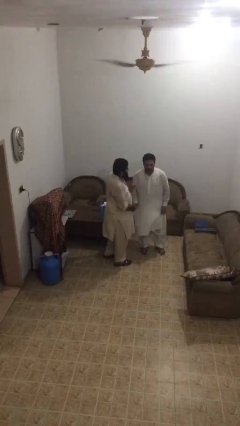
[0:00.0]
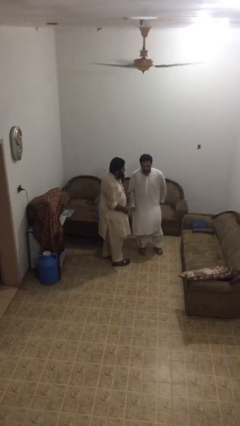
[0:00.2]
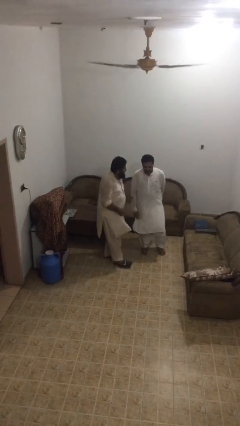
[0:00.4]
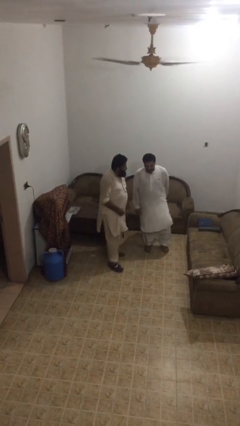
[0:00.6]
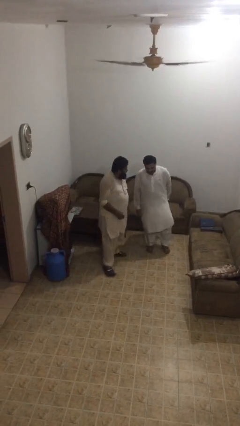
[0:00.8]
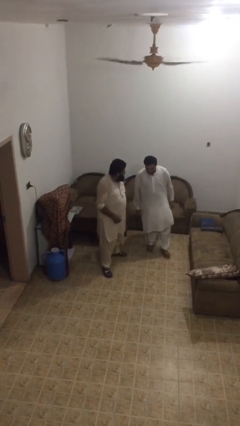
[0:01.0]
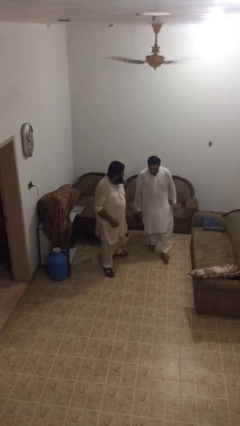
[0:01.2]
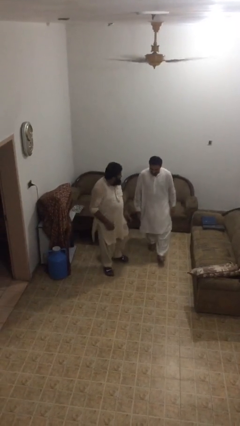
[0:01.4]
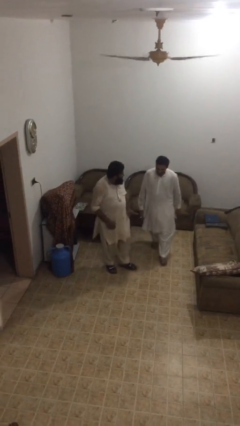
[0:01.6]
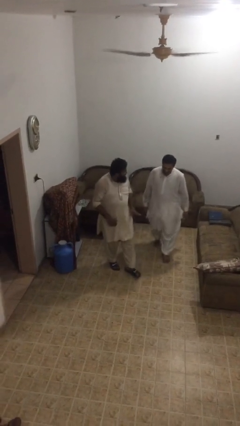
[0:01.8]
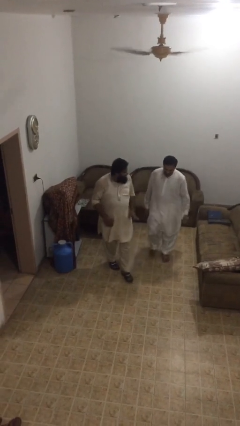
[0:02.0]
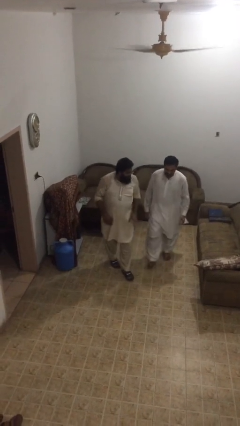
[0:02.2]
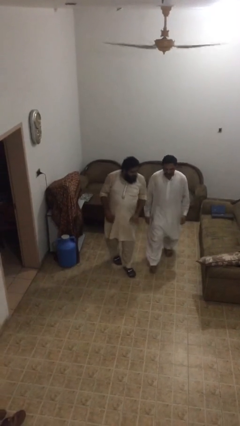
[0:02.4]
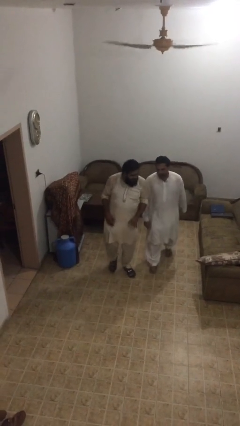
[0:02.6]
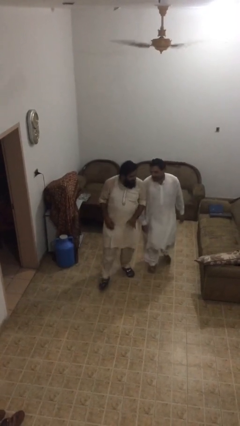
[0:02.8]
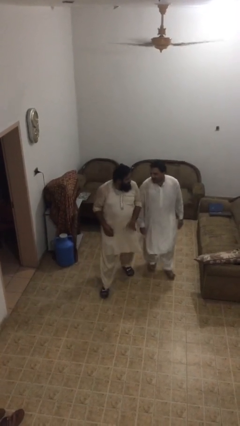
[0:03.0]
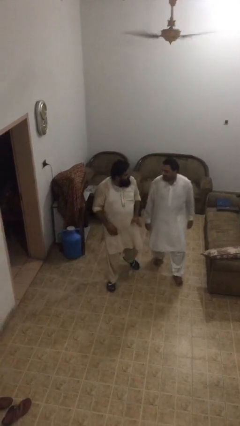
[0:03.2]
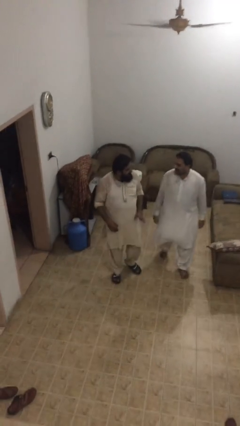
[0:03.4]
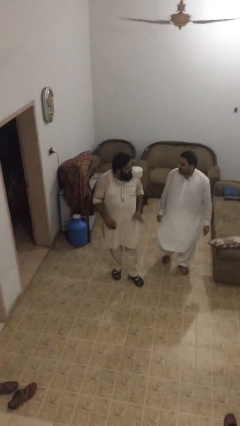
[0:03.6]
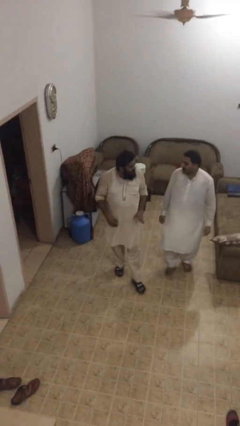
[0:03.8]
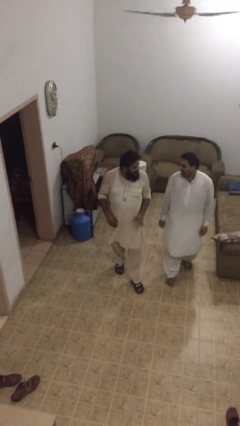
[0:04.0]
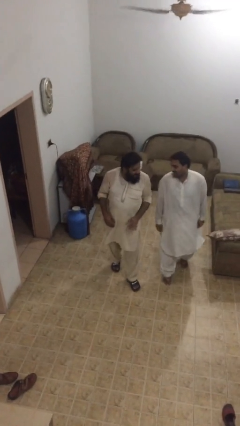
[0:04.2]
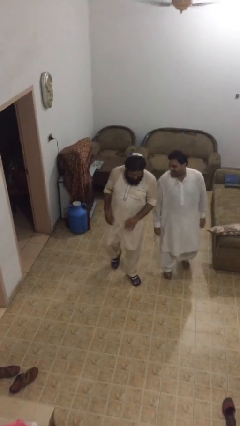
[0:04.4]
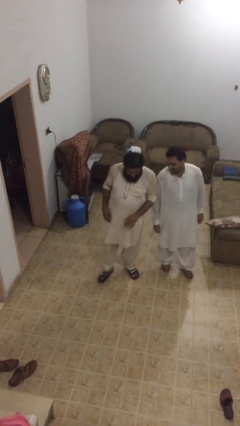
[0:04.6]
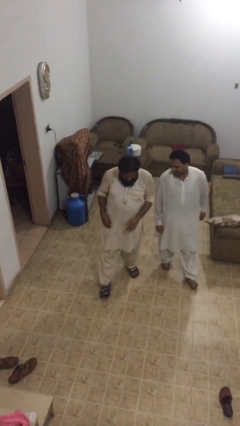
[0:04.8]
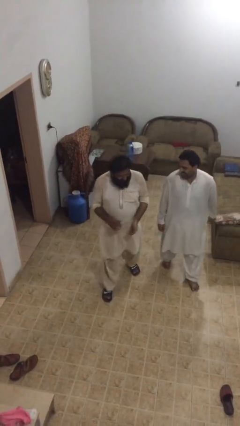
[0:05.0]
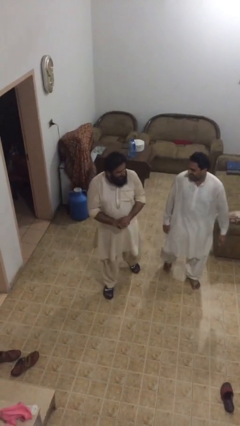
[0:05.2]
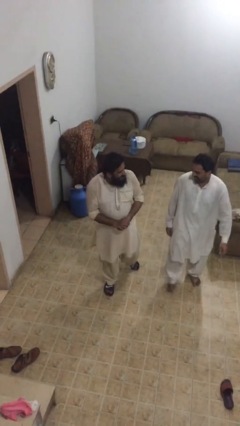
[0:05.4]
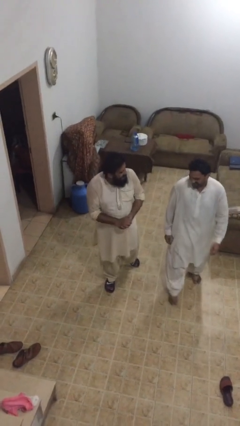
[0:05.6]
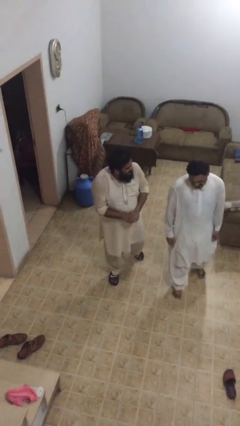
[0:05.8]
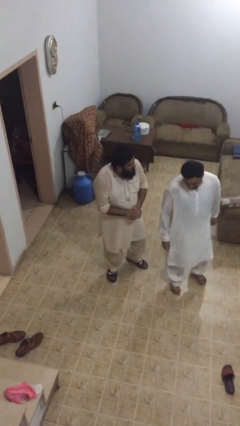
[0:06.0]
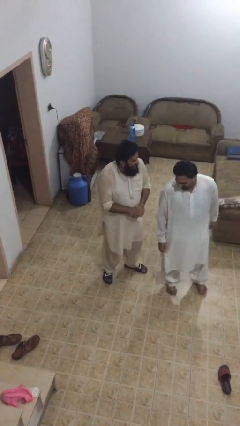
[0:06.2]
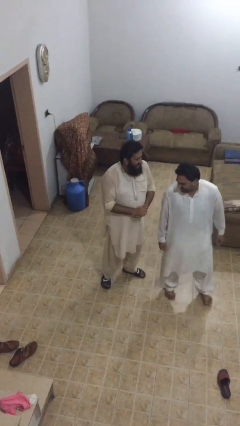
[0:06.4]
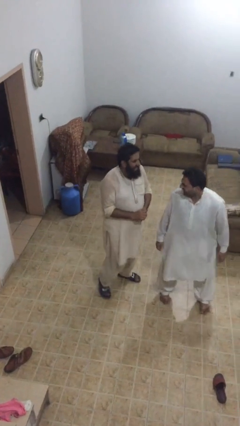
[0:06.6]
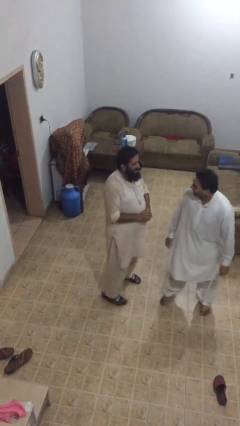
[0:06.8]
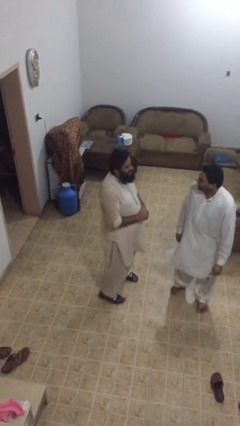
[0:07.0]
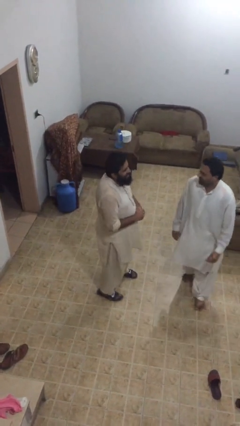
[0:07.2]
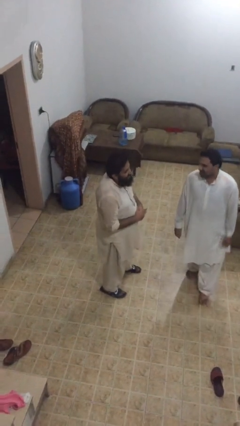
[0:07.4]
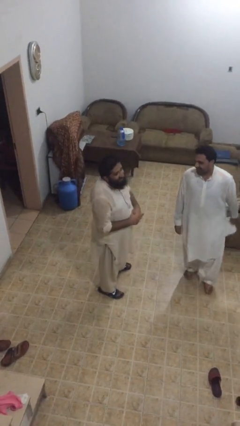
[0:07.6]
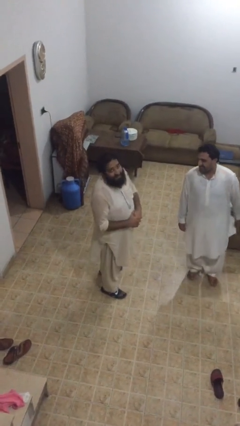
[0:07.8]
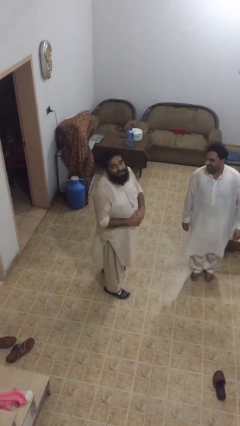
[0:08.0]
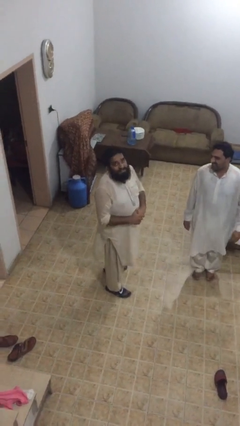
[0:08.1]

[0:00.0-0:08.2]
person talks to person

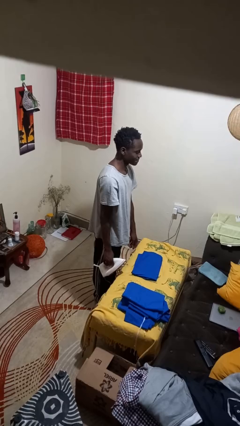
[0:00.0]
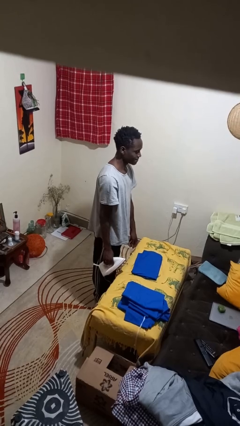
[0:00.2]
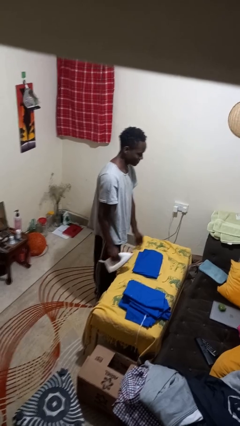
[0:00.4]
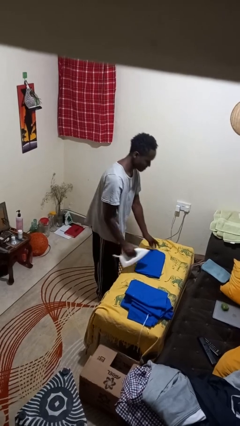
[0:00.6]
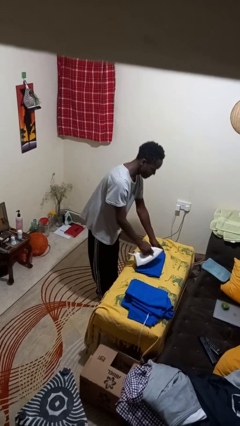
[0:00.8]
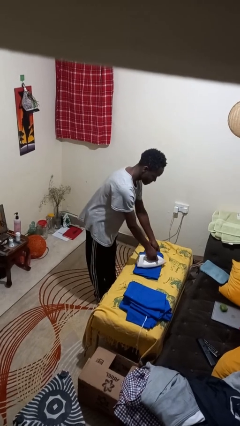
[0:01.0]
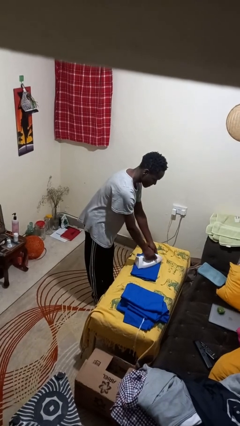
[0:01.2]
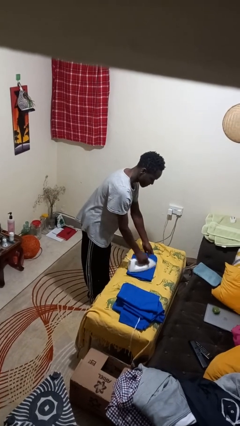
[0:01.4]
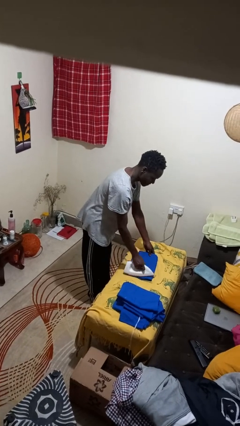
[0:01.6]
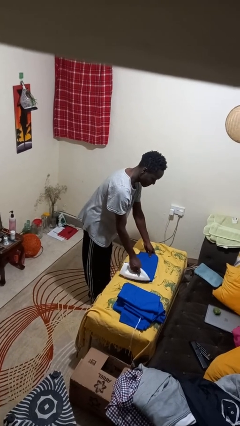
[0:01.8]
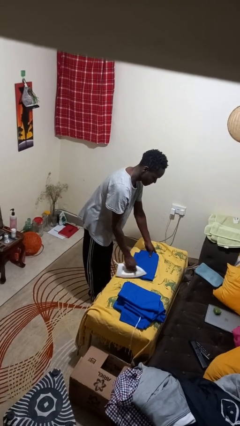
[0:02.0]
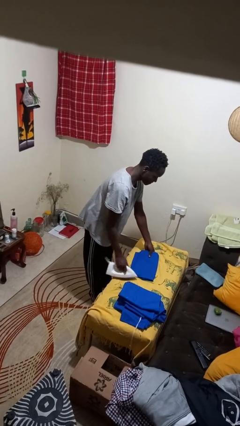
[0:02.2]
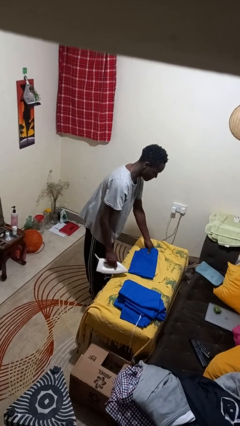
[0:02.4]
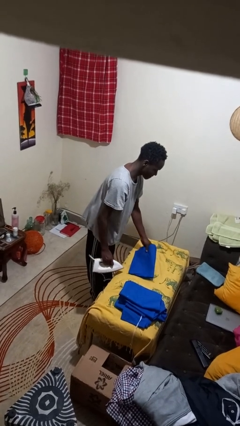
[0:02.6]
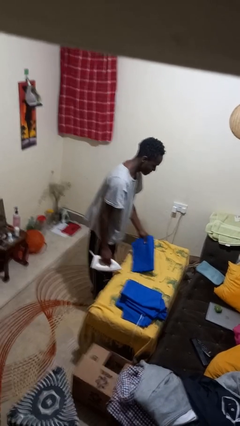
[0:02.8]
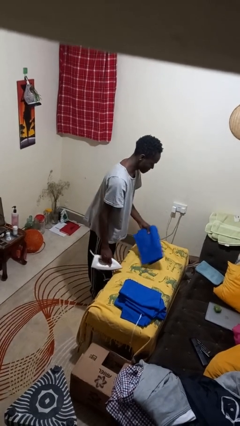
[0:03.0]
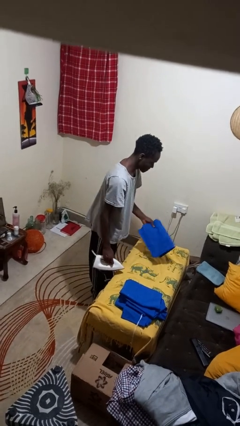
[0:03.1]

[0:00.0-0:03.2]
person irons clothes

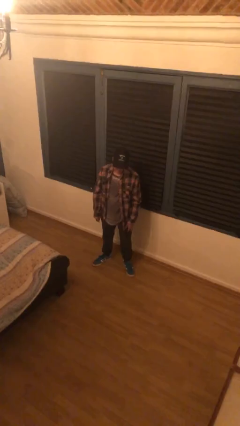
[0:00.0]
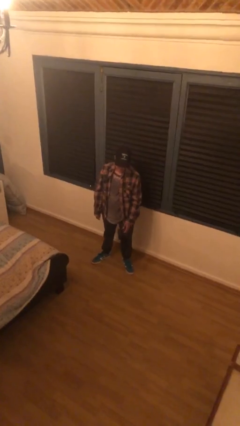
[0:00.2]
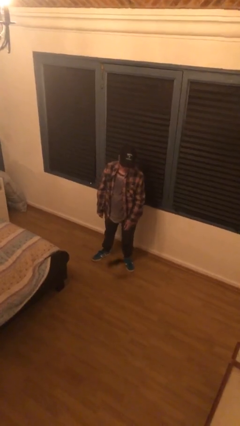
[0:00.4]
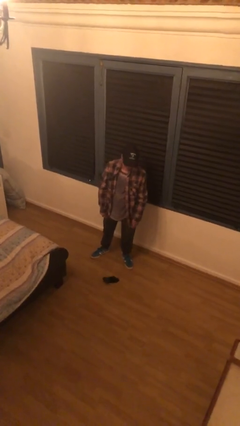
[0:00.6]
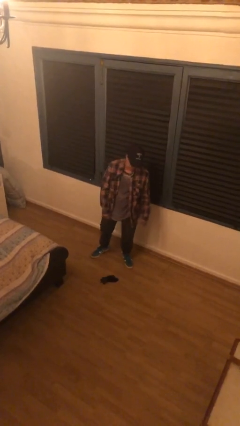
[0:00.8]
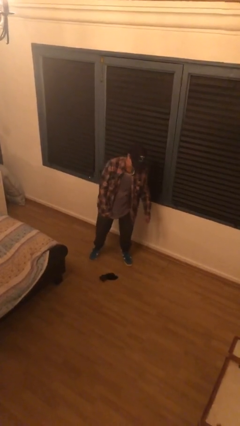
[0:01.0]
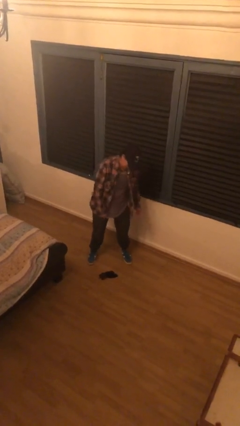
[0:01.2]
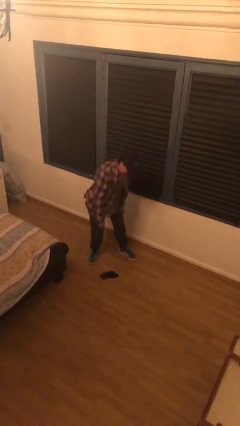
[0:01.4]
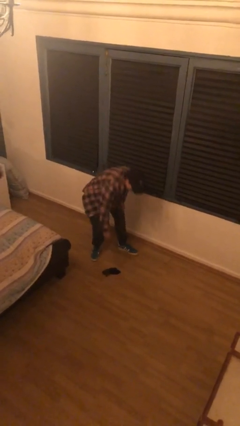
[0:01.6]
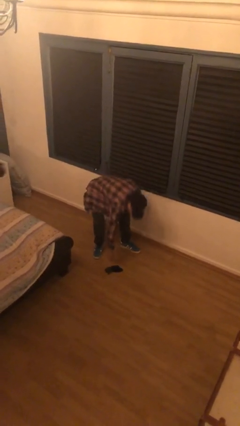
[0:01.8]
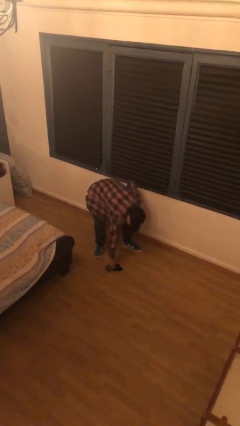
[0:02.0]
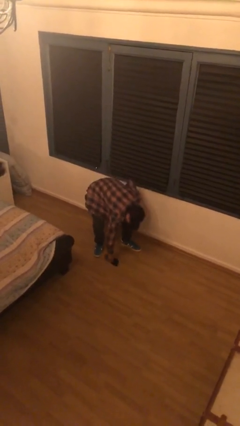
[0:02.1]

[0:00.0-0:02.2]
person drops object

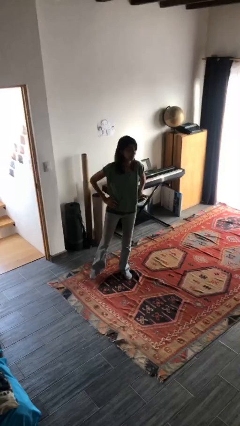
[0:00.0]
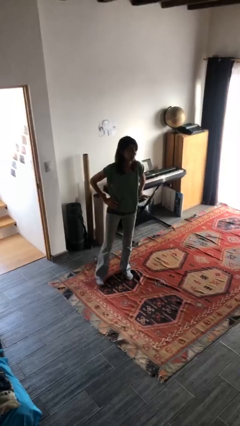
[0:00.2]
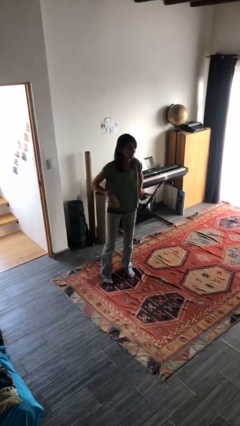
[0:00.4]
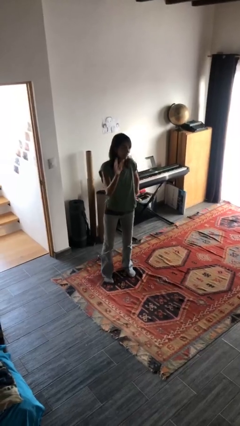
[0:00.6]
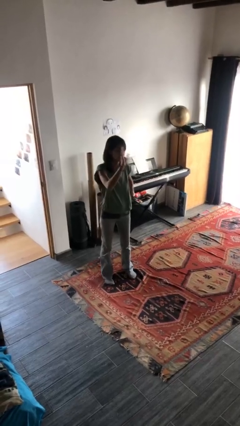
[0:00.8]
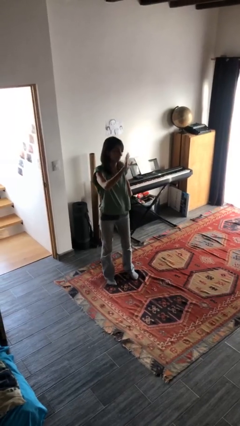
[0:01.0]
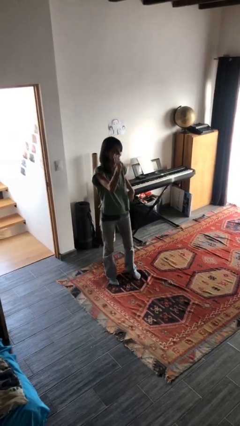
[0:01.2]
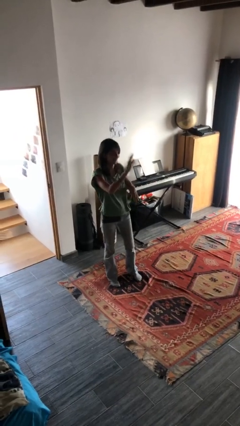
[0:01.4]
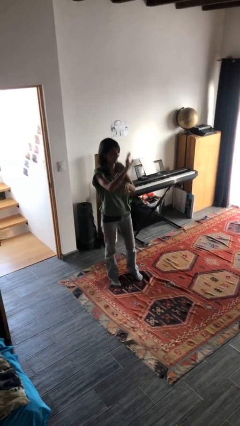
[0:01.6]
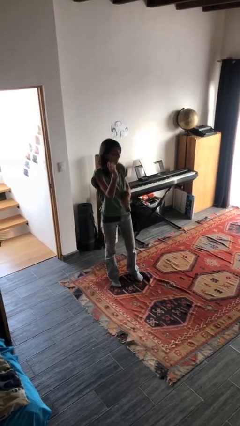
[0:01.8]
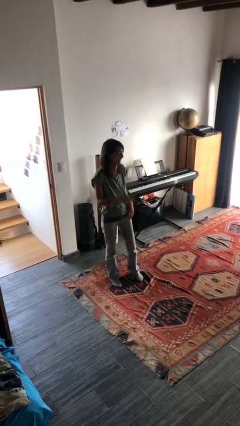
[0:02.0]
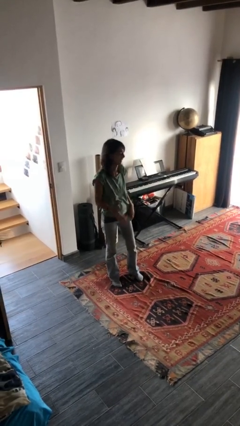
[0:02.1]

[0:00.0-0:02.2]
person waves at person

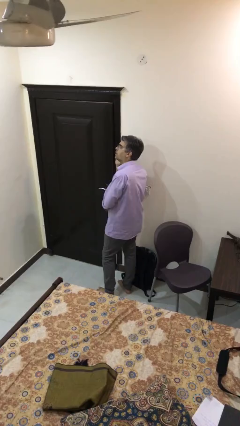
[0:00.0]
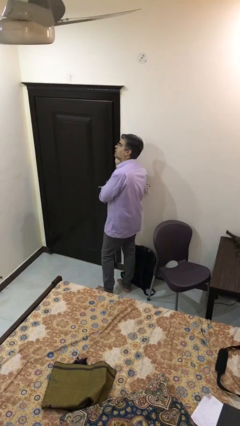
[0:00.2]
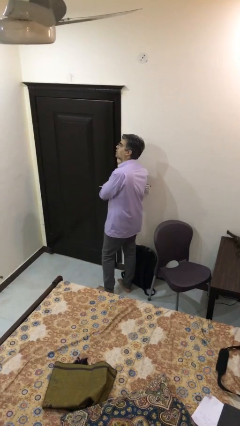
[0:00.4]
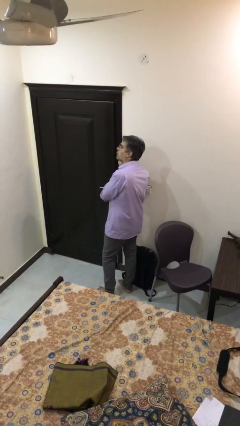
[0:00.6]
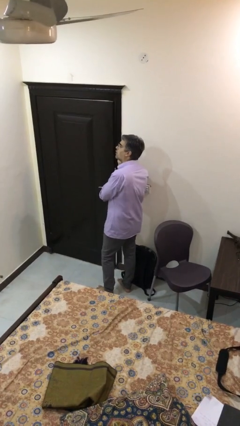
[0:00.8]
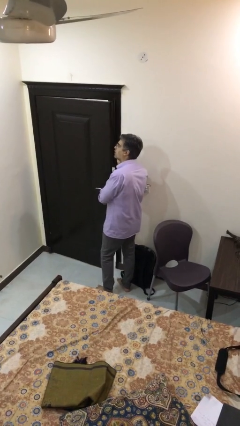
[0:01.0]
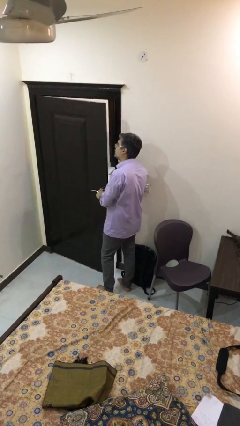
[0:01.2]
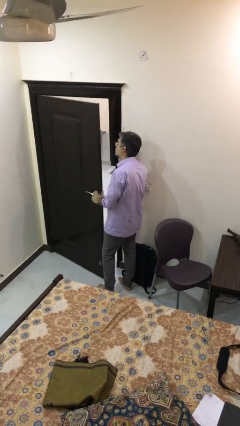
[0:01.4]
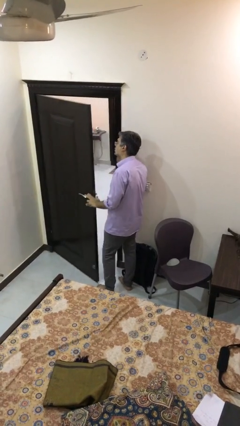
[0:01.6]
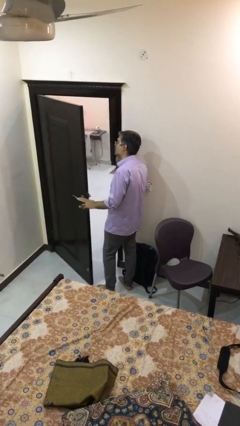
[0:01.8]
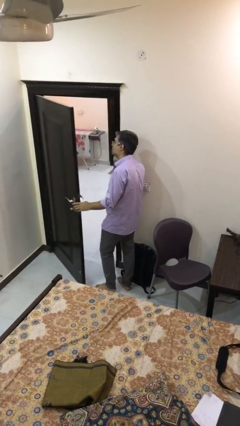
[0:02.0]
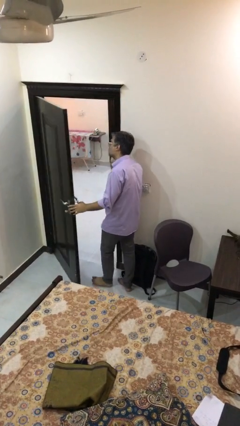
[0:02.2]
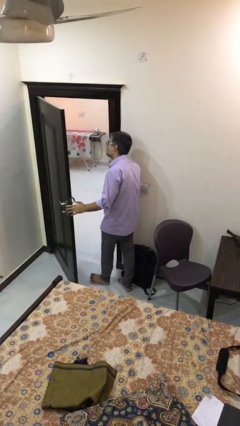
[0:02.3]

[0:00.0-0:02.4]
person opens facility door
